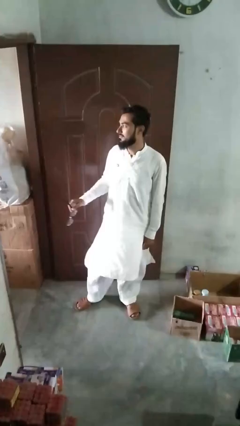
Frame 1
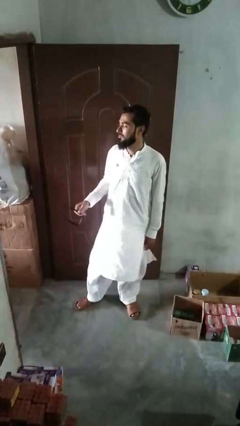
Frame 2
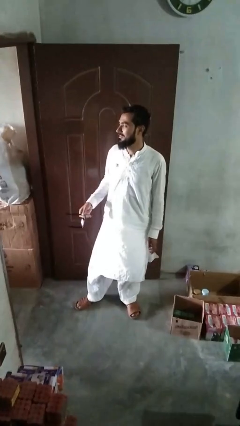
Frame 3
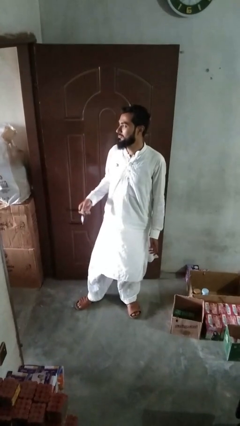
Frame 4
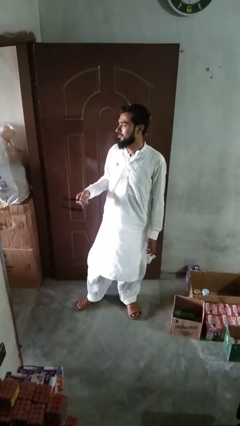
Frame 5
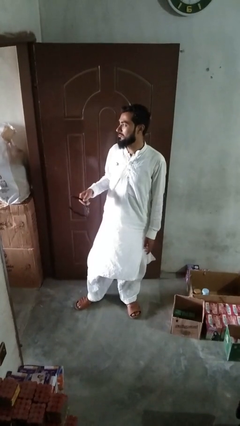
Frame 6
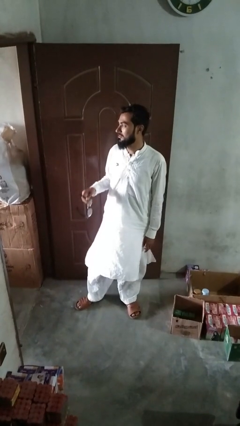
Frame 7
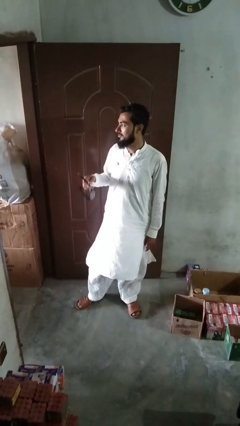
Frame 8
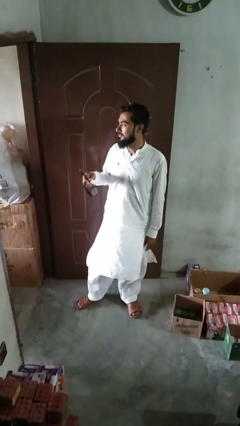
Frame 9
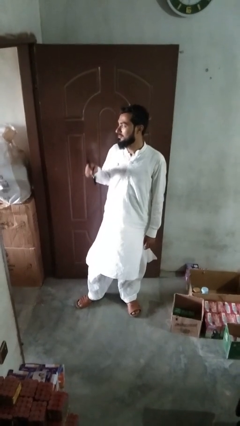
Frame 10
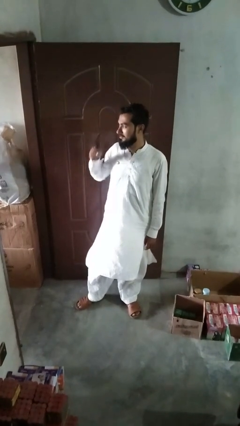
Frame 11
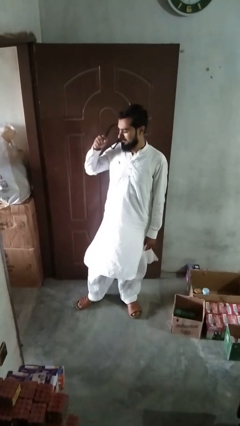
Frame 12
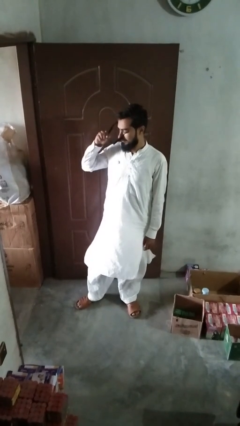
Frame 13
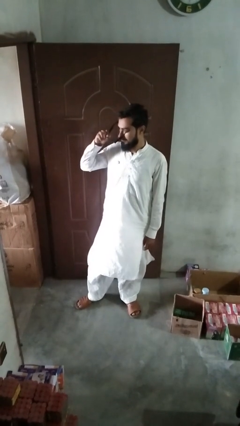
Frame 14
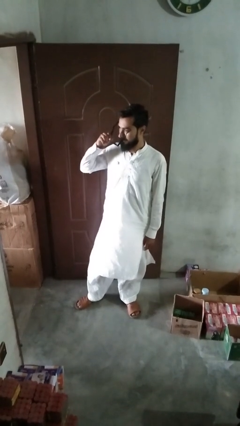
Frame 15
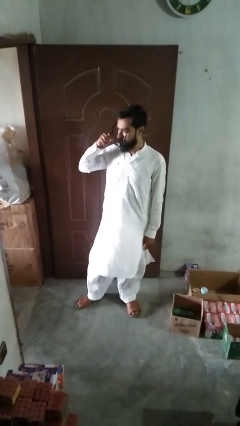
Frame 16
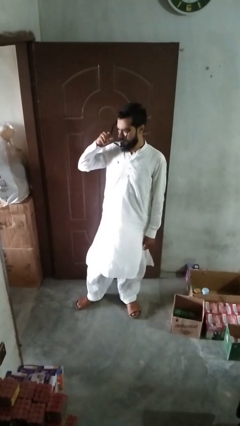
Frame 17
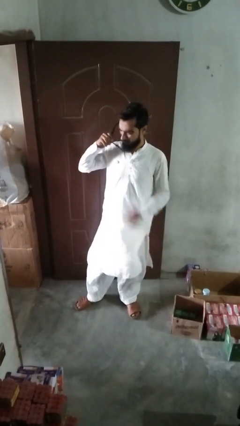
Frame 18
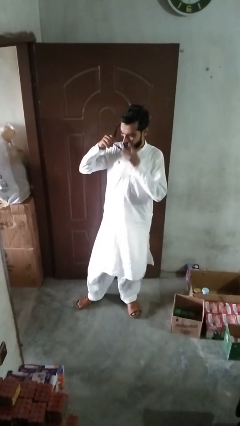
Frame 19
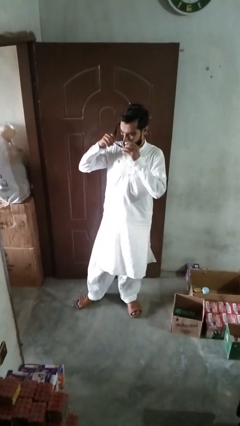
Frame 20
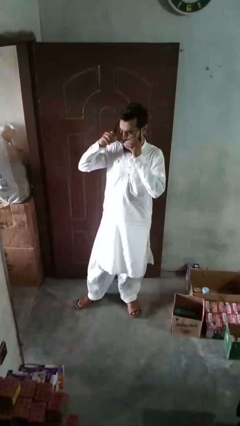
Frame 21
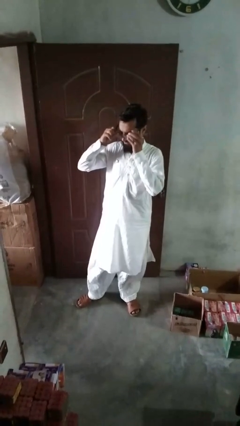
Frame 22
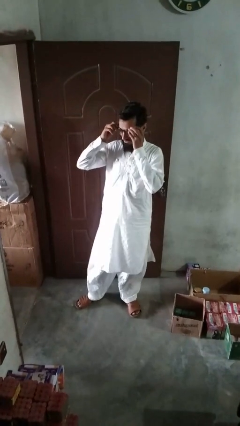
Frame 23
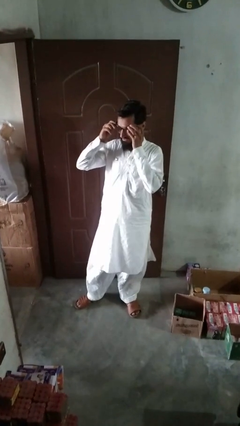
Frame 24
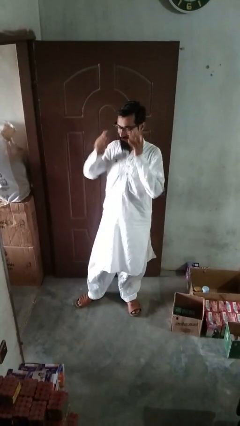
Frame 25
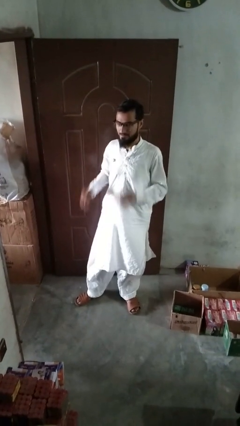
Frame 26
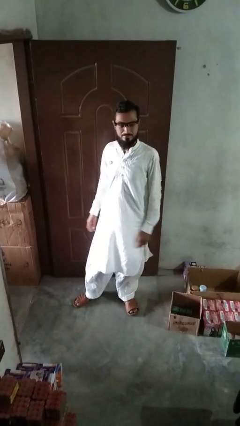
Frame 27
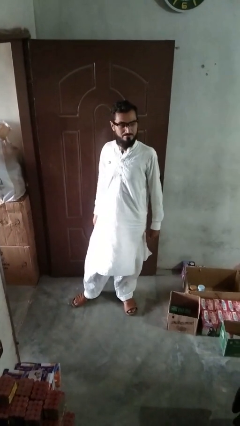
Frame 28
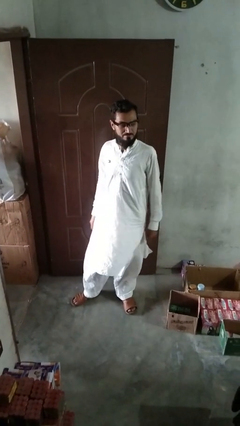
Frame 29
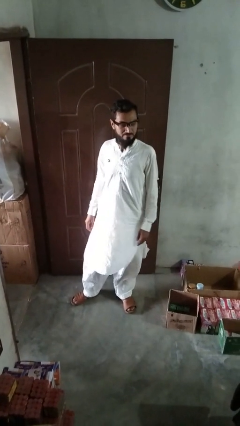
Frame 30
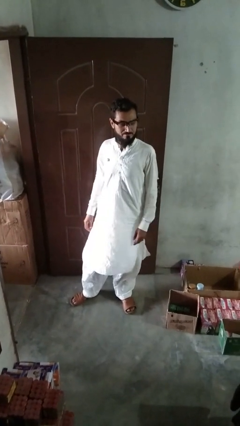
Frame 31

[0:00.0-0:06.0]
person puts on glasses

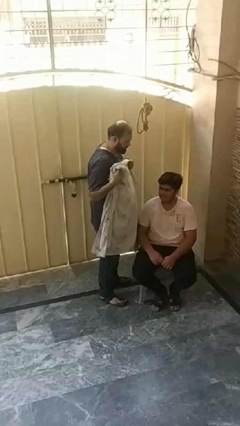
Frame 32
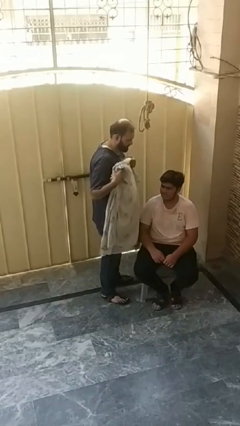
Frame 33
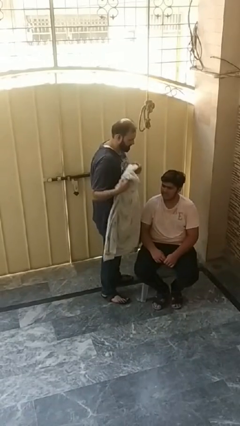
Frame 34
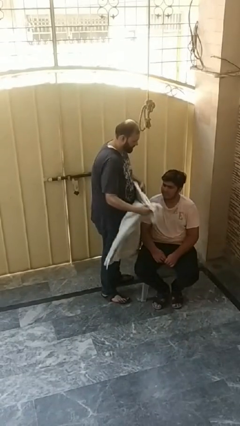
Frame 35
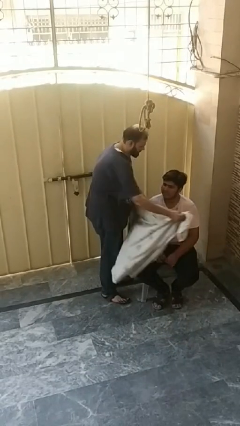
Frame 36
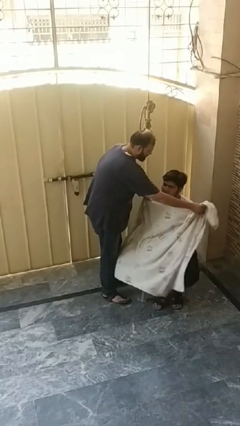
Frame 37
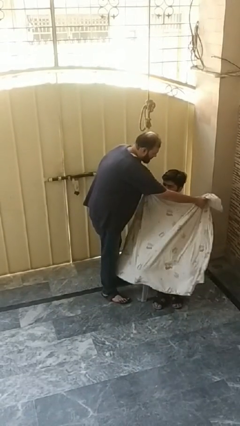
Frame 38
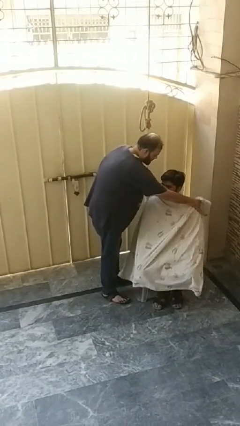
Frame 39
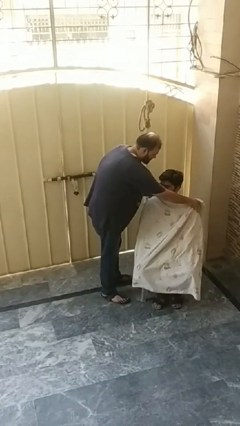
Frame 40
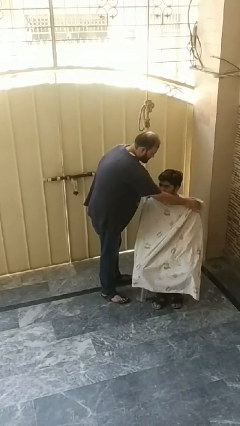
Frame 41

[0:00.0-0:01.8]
person covers friend with blanket

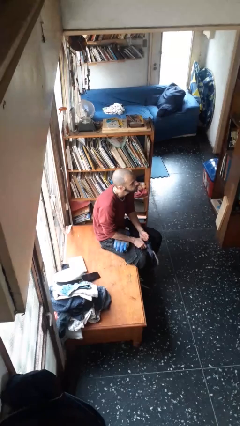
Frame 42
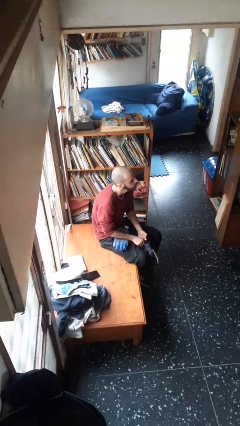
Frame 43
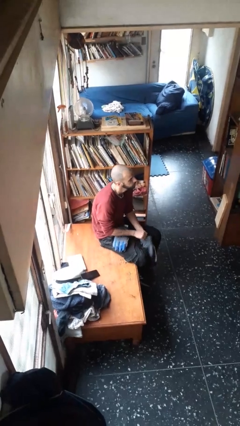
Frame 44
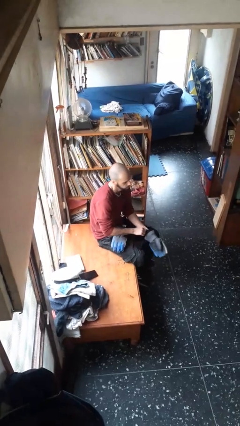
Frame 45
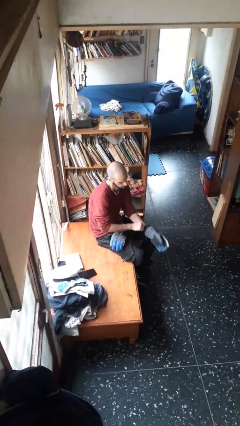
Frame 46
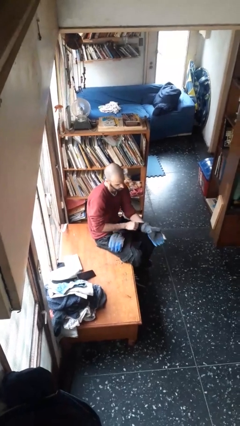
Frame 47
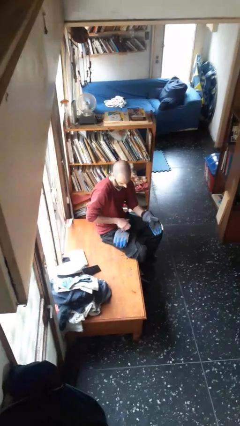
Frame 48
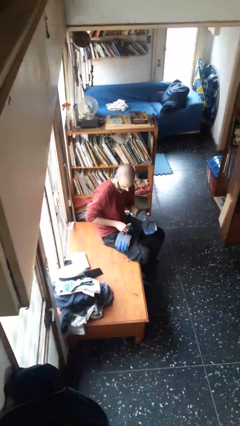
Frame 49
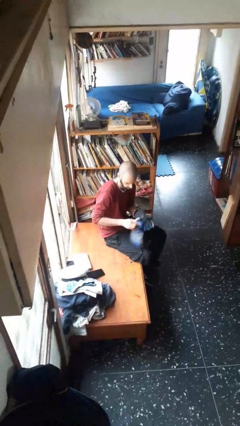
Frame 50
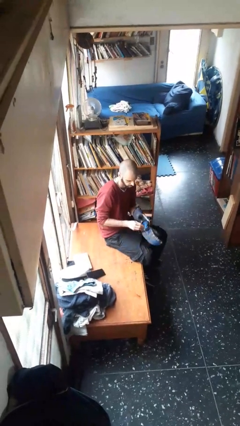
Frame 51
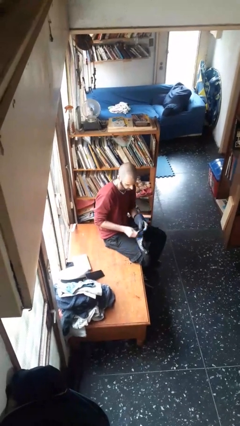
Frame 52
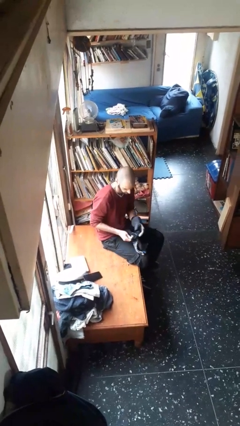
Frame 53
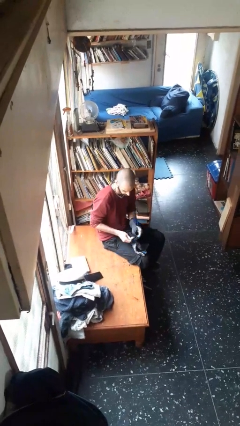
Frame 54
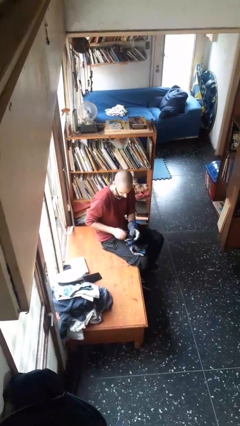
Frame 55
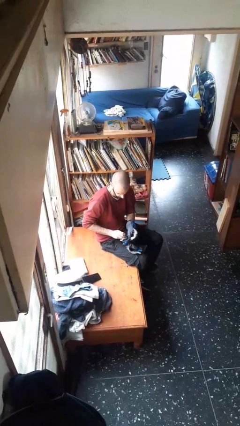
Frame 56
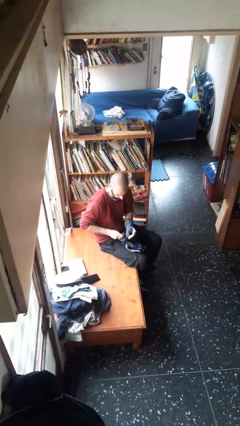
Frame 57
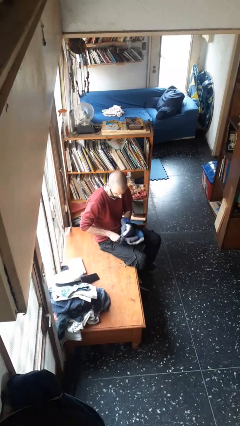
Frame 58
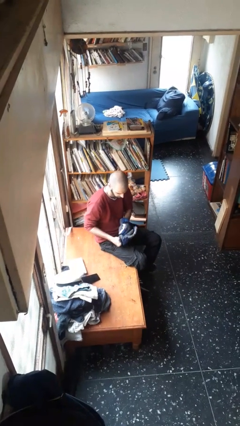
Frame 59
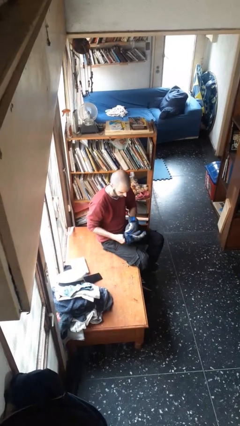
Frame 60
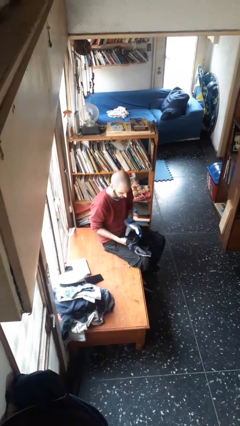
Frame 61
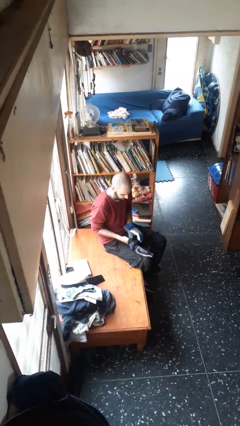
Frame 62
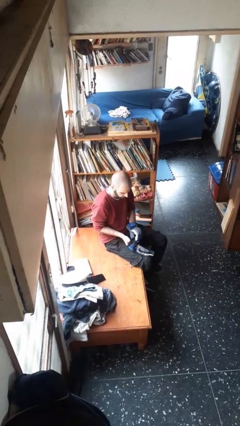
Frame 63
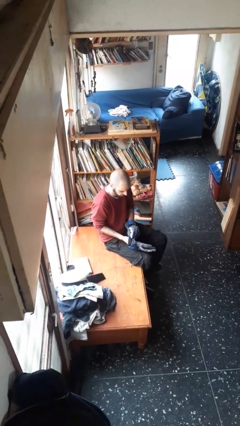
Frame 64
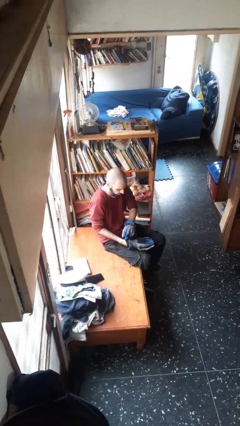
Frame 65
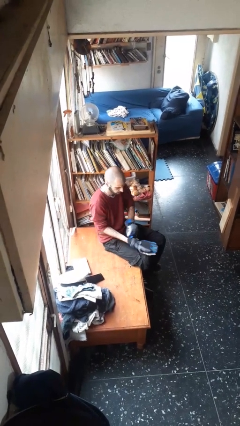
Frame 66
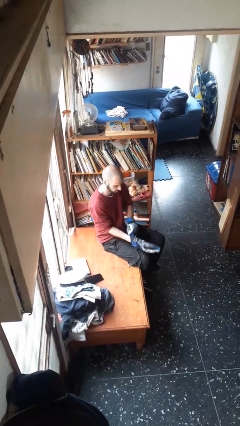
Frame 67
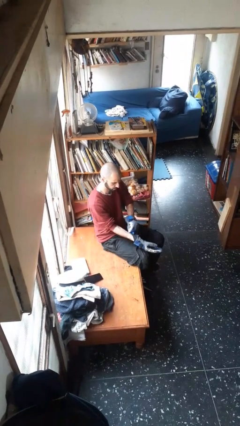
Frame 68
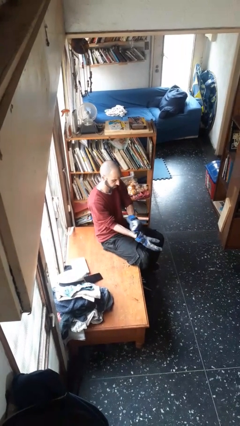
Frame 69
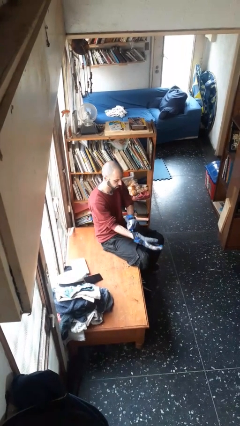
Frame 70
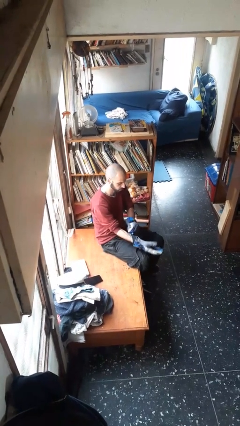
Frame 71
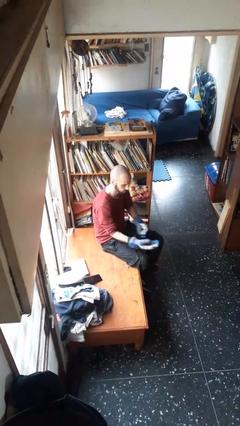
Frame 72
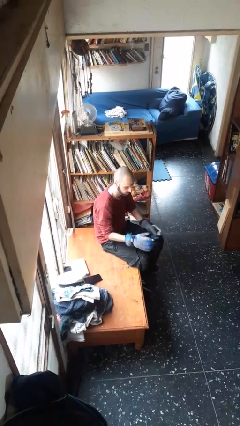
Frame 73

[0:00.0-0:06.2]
person puts on gloves

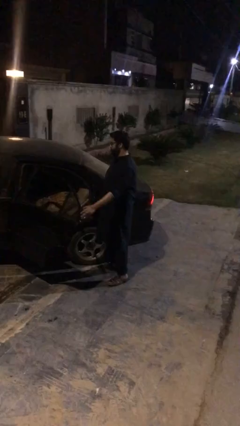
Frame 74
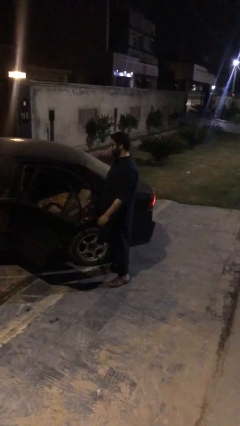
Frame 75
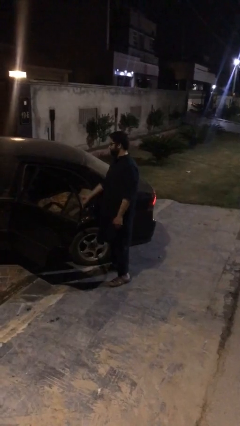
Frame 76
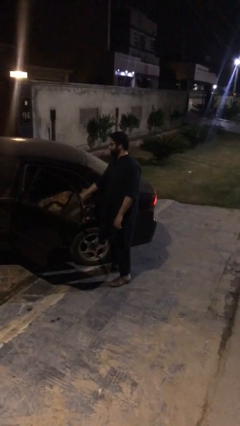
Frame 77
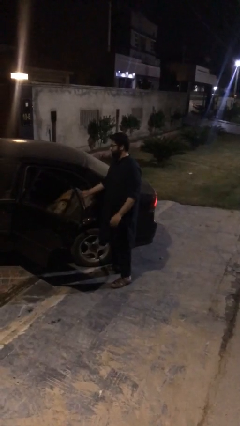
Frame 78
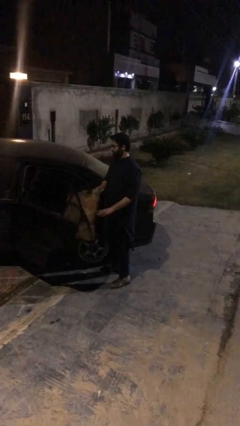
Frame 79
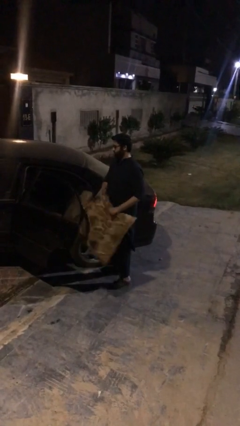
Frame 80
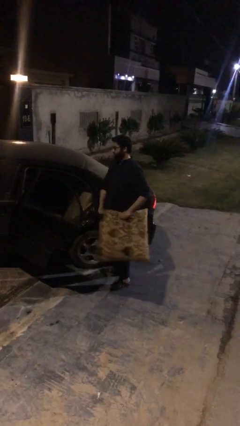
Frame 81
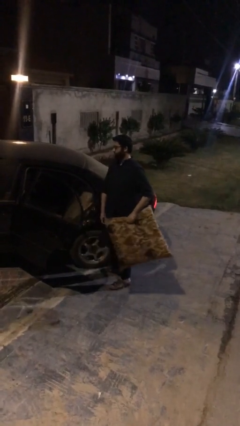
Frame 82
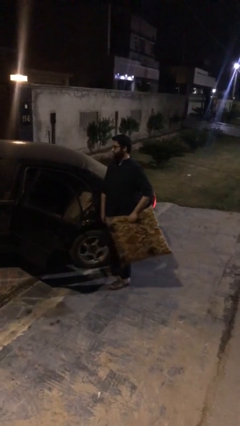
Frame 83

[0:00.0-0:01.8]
person unloads car

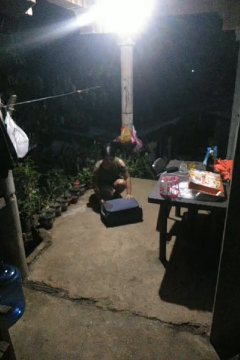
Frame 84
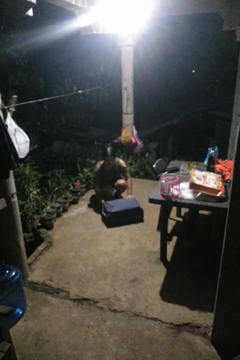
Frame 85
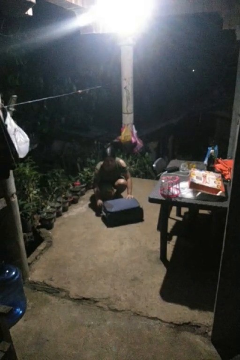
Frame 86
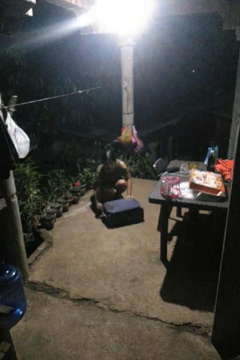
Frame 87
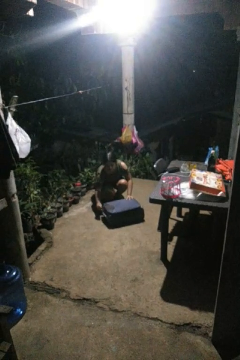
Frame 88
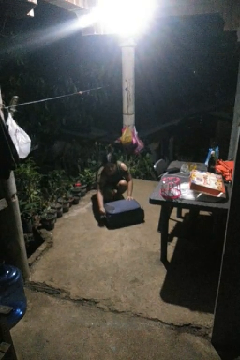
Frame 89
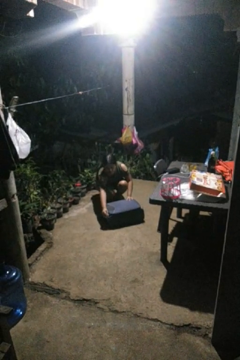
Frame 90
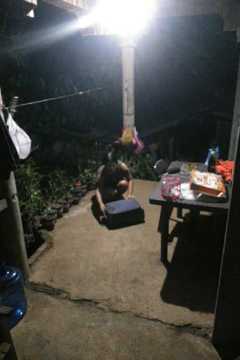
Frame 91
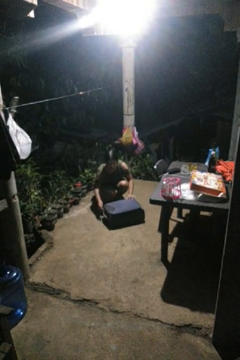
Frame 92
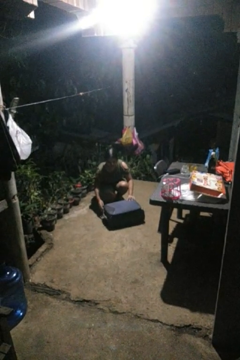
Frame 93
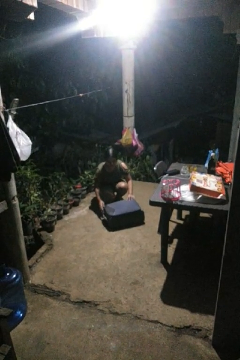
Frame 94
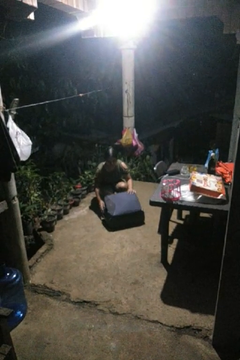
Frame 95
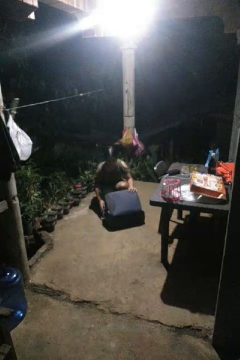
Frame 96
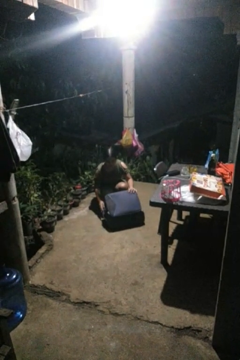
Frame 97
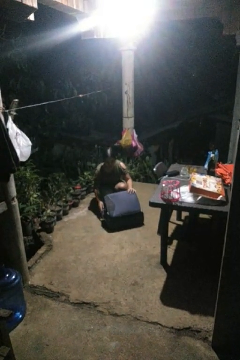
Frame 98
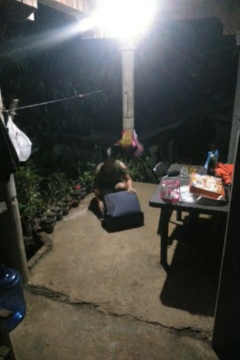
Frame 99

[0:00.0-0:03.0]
person opens suitcase
